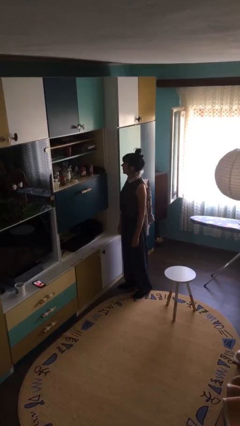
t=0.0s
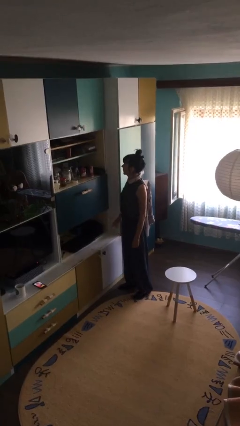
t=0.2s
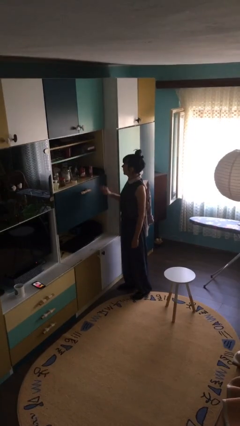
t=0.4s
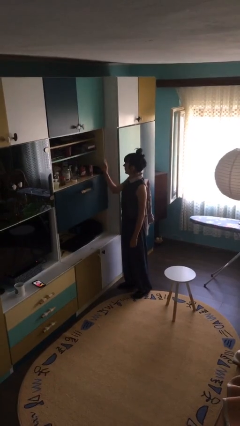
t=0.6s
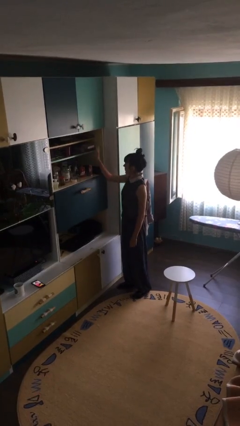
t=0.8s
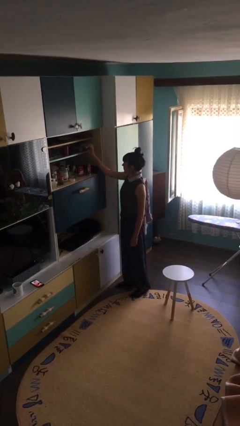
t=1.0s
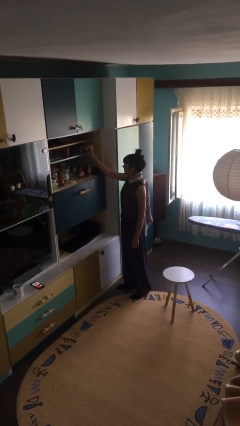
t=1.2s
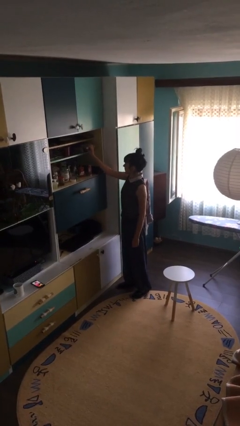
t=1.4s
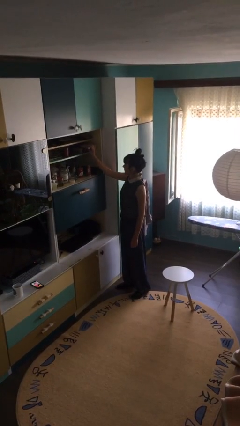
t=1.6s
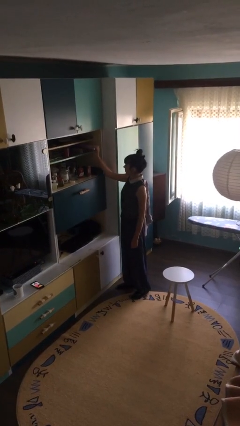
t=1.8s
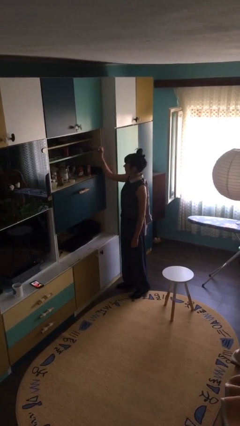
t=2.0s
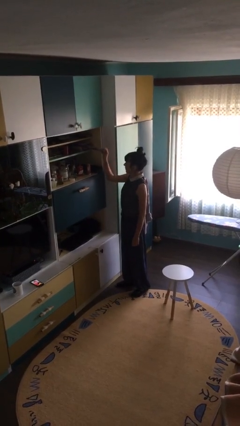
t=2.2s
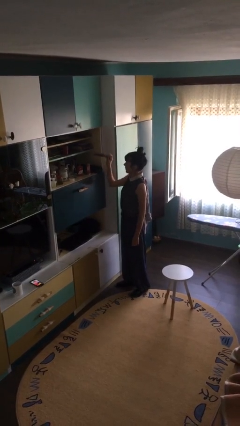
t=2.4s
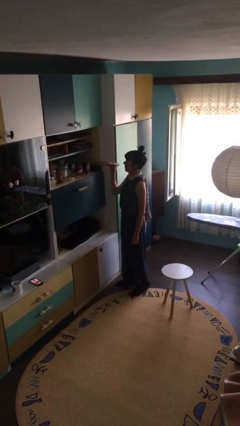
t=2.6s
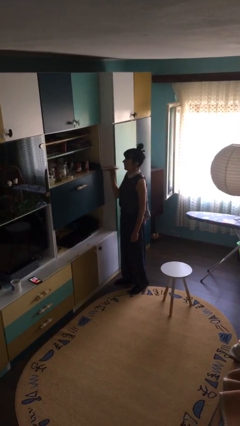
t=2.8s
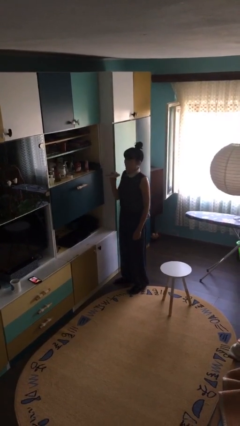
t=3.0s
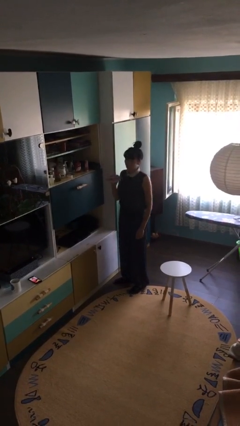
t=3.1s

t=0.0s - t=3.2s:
person picks up object from shelf

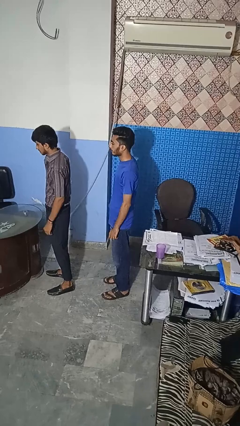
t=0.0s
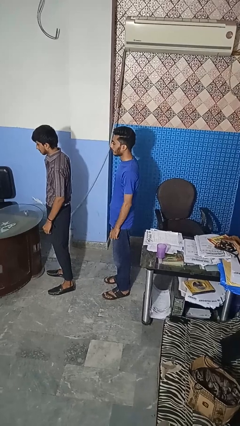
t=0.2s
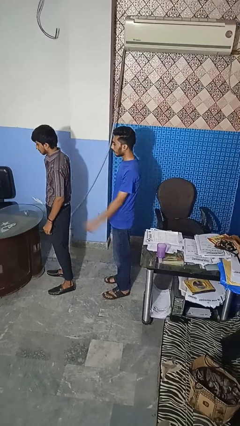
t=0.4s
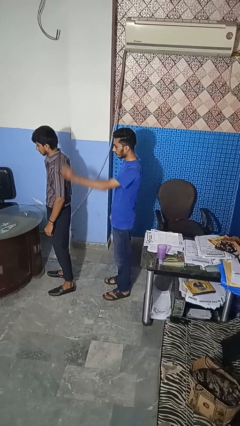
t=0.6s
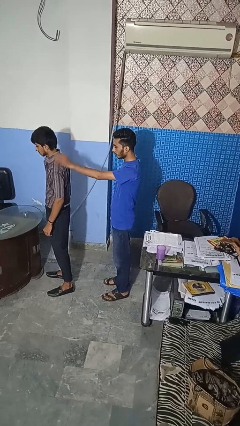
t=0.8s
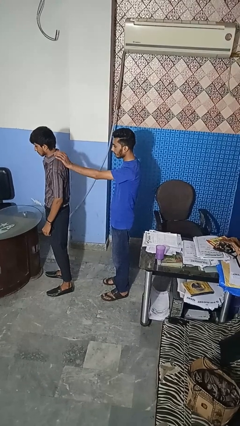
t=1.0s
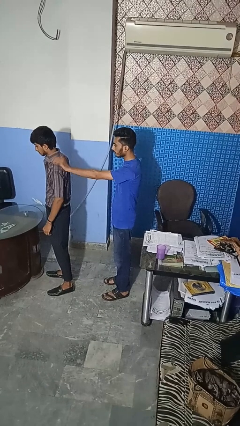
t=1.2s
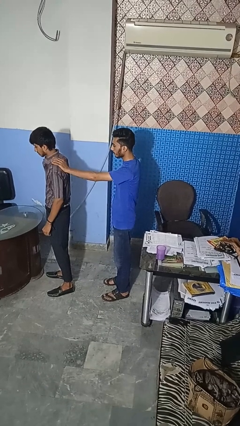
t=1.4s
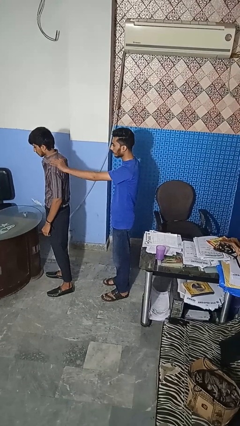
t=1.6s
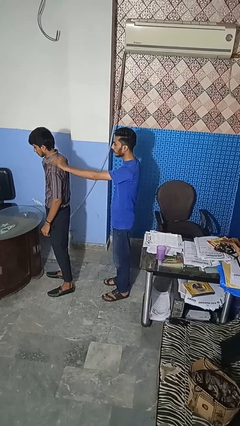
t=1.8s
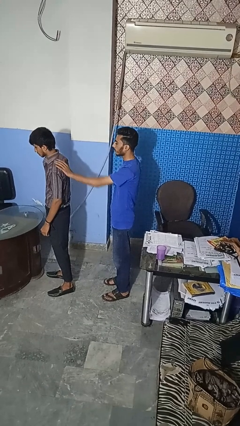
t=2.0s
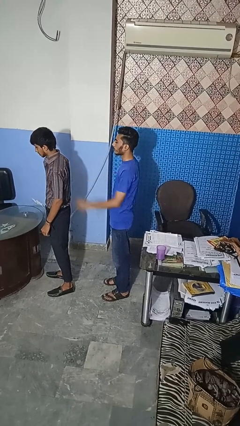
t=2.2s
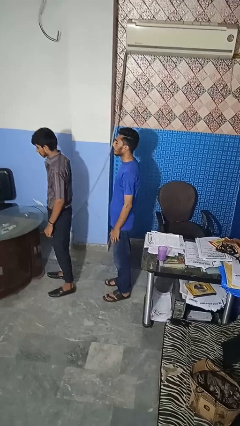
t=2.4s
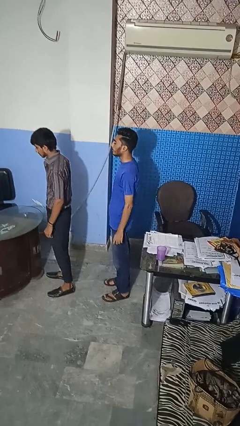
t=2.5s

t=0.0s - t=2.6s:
person touches back of person

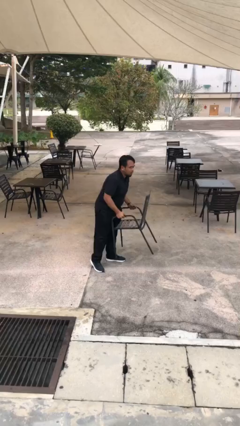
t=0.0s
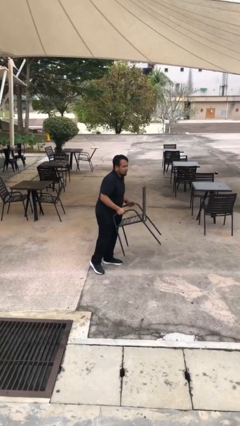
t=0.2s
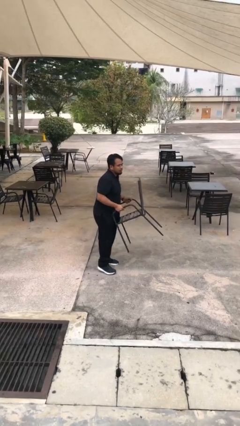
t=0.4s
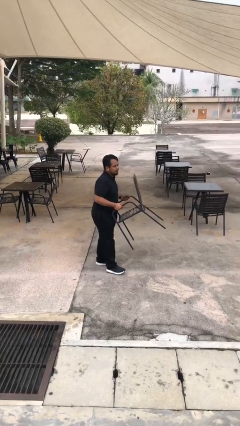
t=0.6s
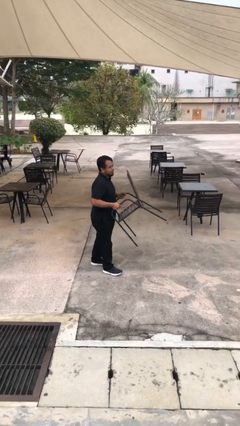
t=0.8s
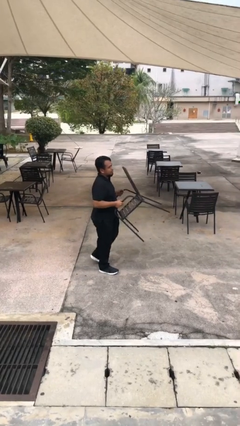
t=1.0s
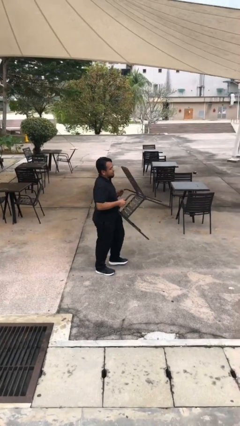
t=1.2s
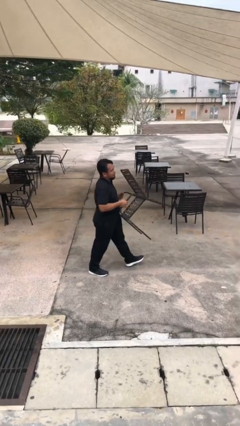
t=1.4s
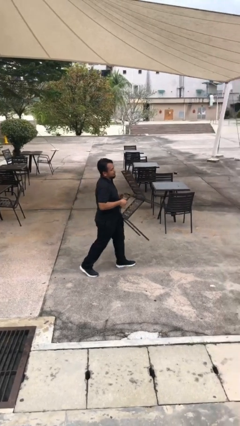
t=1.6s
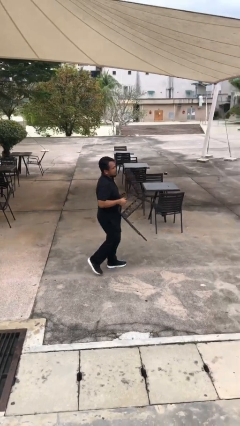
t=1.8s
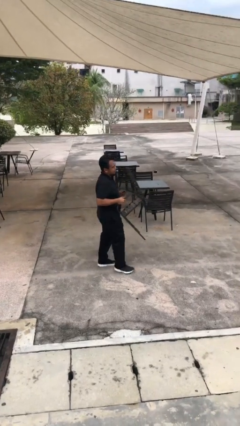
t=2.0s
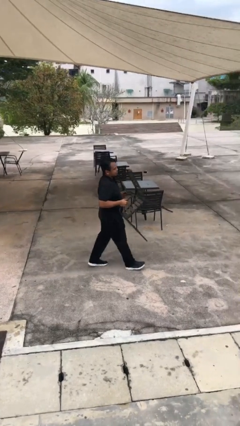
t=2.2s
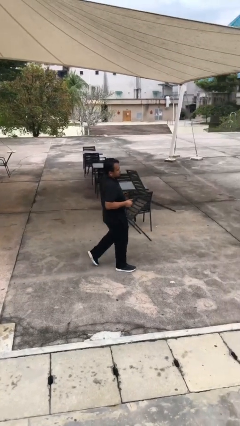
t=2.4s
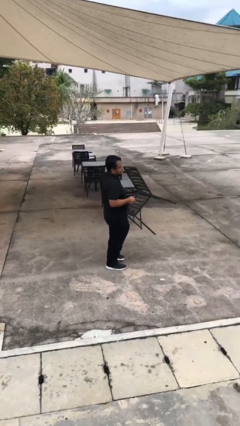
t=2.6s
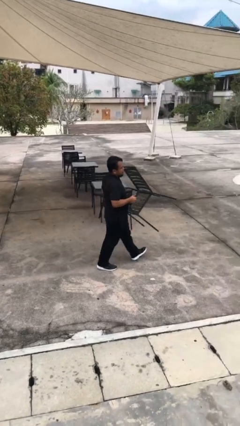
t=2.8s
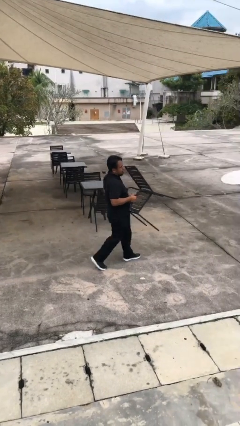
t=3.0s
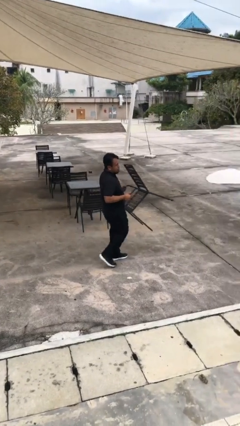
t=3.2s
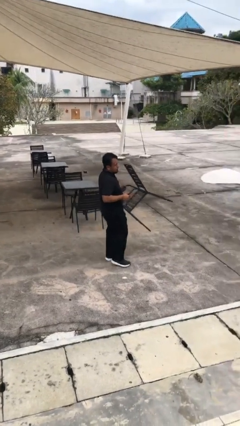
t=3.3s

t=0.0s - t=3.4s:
person carries heavy object

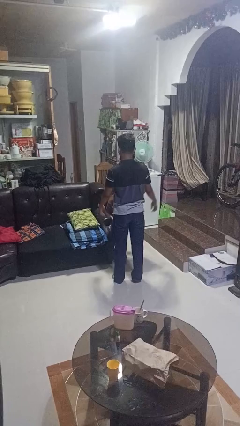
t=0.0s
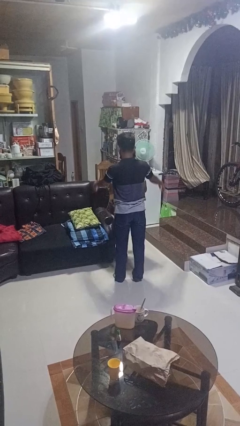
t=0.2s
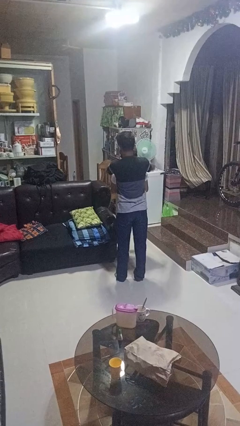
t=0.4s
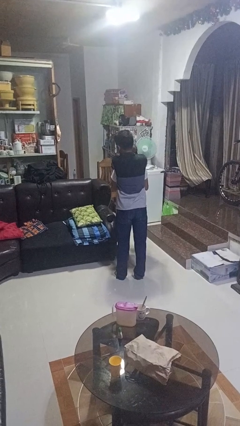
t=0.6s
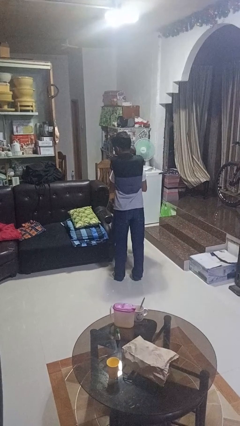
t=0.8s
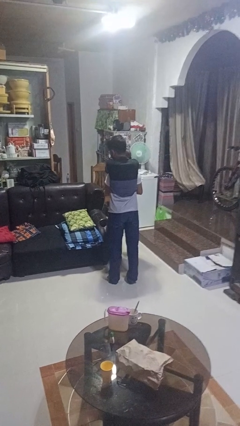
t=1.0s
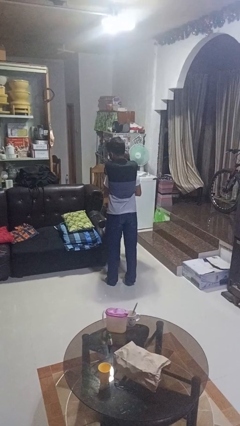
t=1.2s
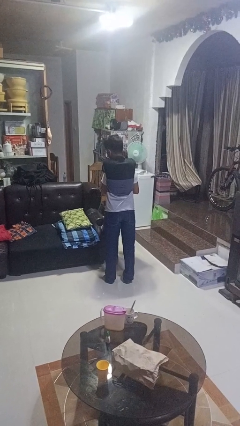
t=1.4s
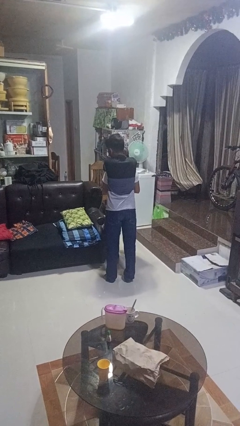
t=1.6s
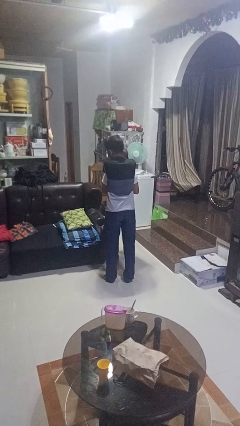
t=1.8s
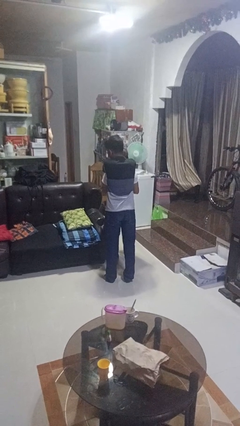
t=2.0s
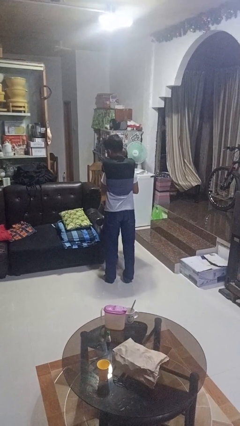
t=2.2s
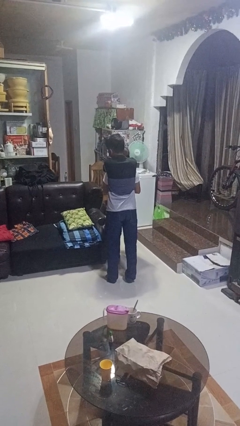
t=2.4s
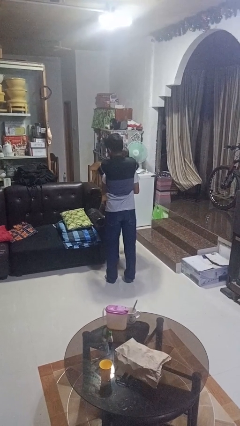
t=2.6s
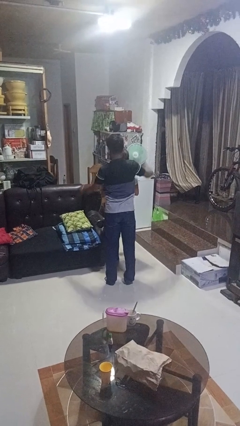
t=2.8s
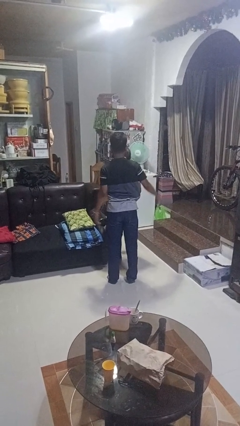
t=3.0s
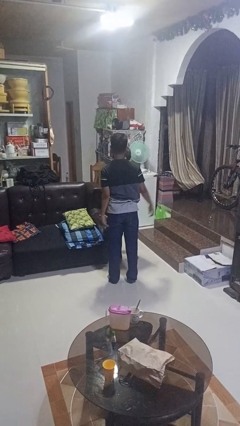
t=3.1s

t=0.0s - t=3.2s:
person hugs person from behind

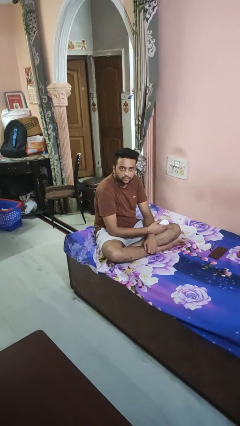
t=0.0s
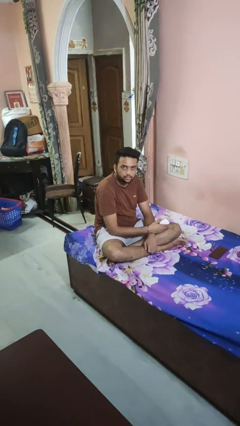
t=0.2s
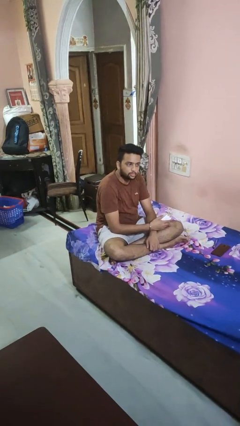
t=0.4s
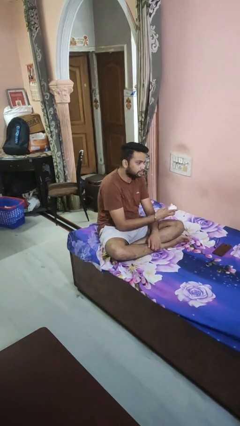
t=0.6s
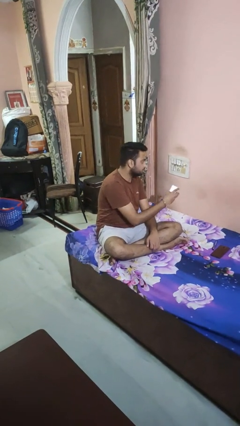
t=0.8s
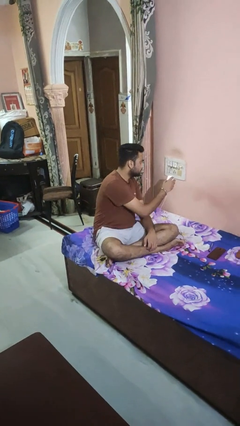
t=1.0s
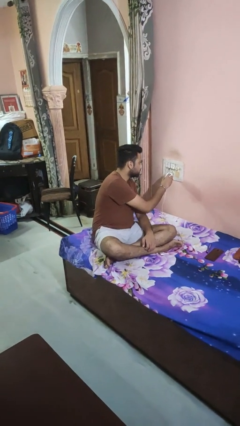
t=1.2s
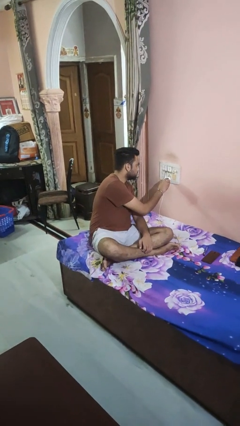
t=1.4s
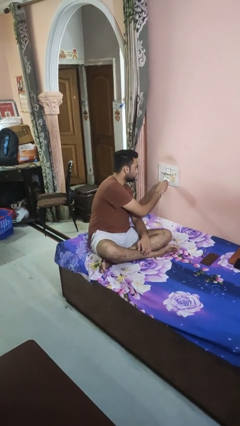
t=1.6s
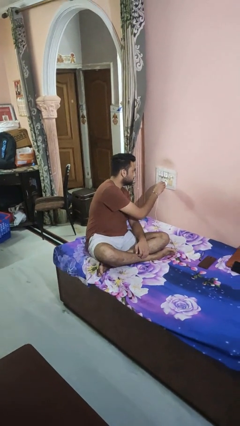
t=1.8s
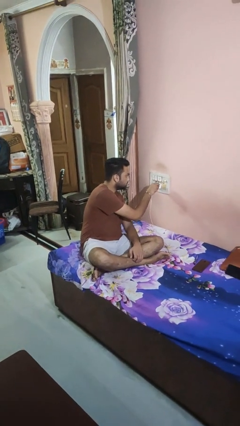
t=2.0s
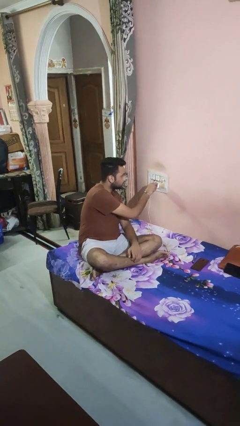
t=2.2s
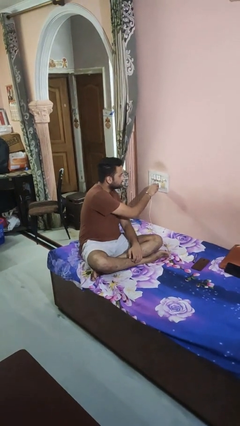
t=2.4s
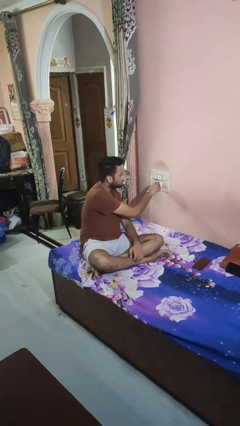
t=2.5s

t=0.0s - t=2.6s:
person plugs into electrical socket

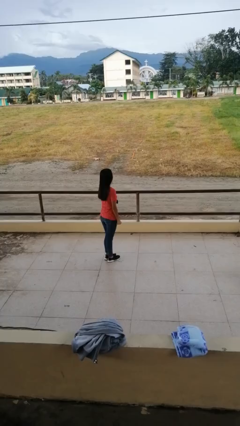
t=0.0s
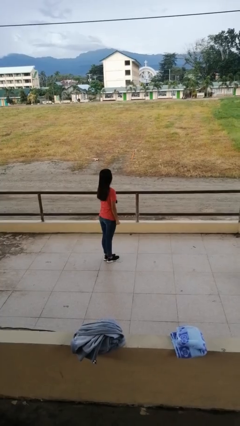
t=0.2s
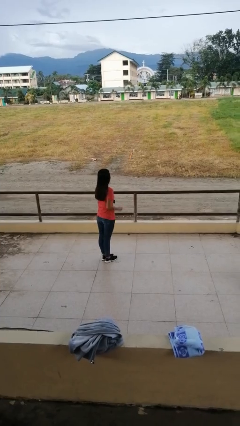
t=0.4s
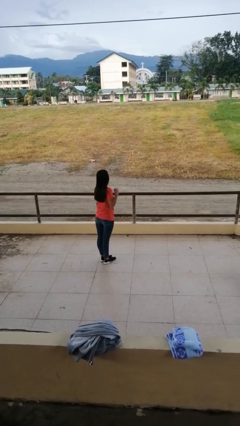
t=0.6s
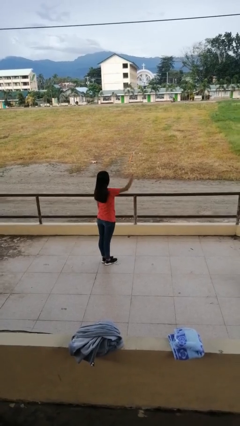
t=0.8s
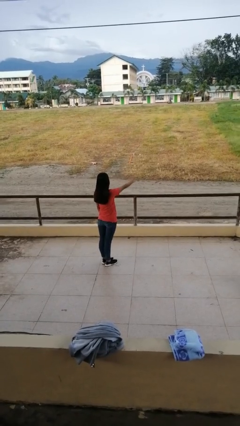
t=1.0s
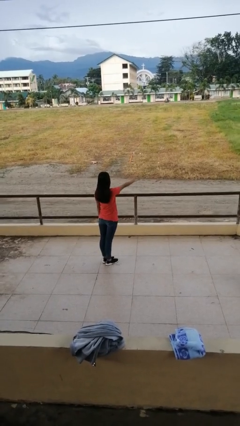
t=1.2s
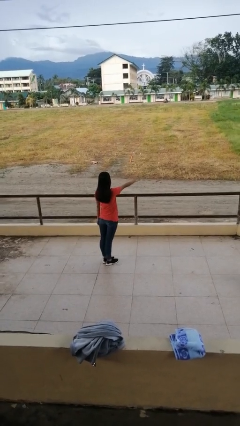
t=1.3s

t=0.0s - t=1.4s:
person punches

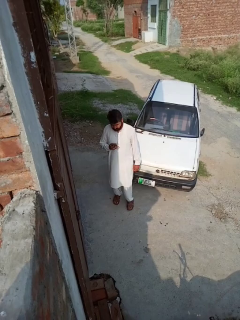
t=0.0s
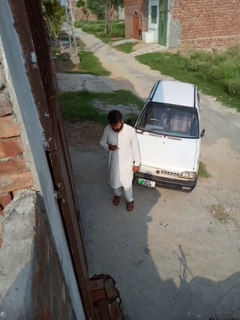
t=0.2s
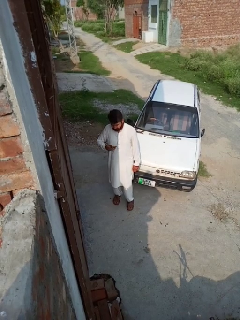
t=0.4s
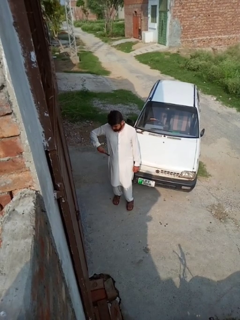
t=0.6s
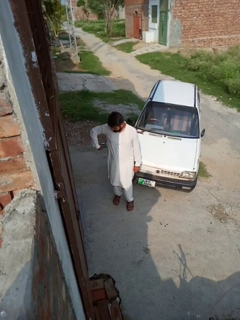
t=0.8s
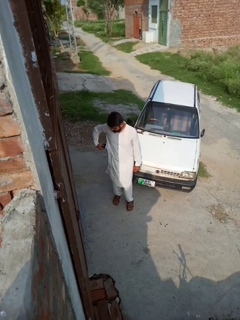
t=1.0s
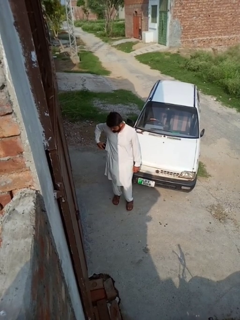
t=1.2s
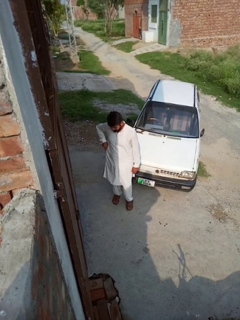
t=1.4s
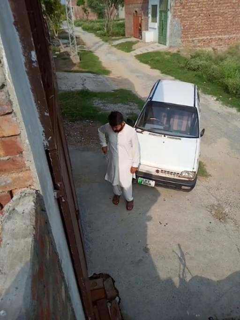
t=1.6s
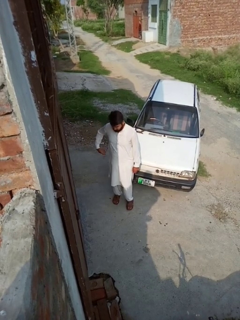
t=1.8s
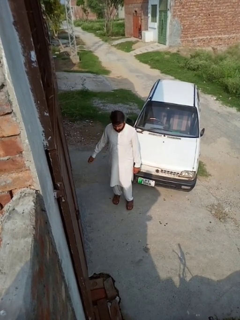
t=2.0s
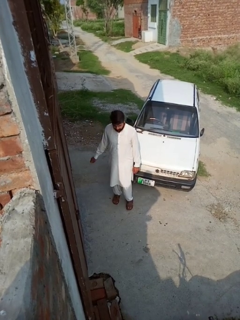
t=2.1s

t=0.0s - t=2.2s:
person puts phone into pocket
